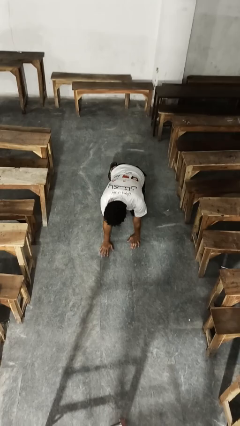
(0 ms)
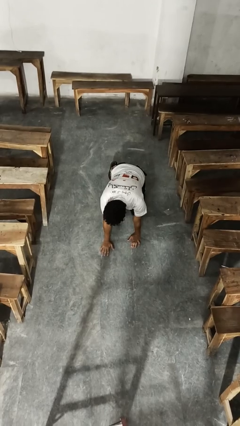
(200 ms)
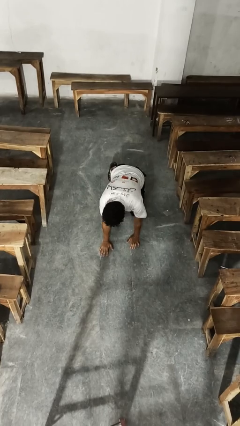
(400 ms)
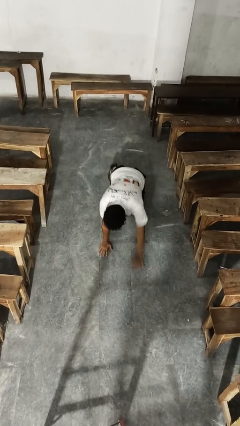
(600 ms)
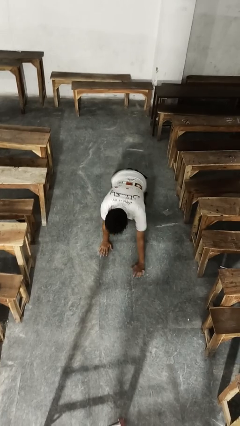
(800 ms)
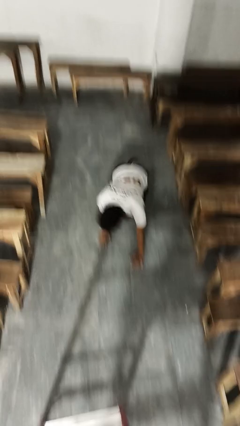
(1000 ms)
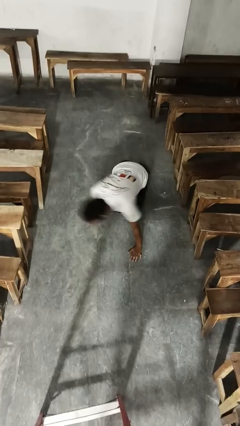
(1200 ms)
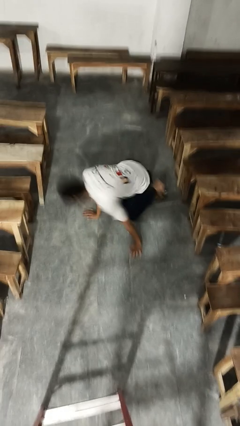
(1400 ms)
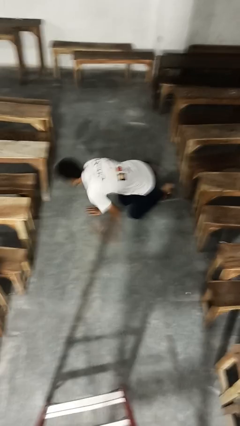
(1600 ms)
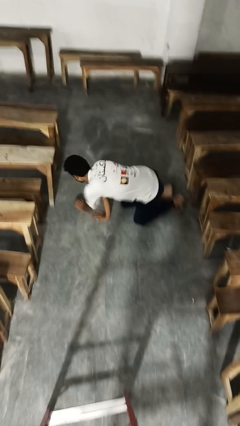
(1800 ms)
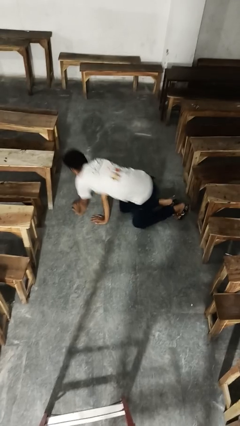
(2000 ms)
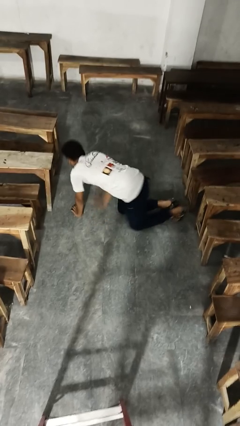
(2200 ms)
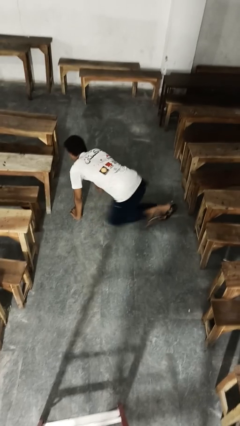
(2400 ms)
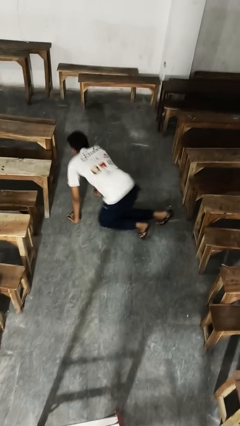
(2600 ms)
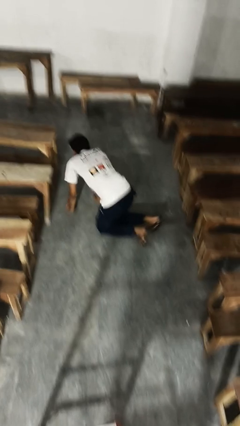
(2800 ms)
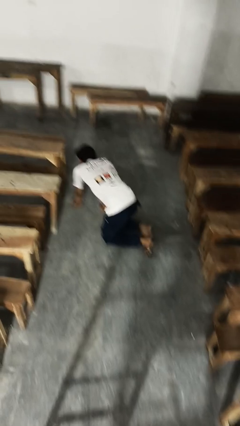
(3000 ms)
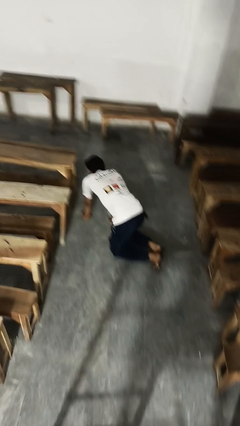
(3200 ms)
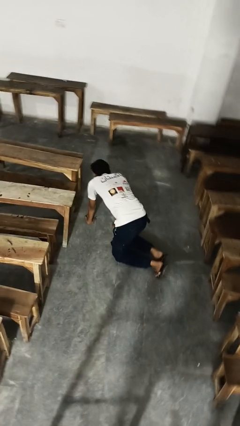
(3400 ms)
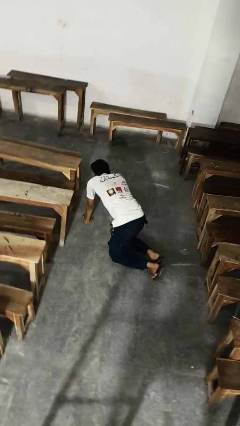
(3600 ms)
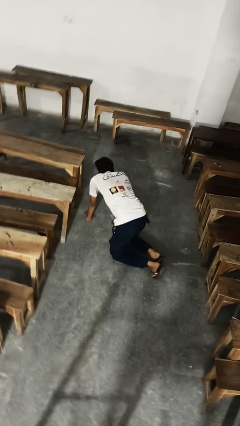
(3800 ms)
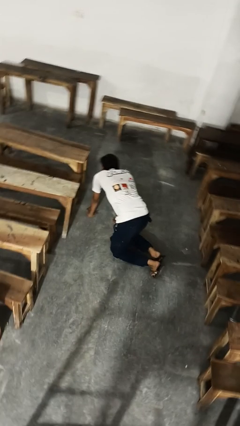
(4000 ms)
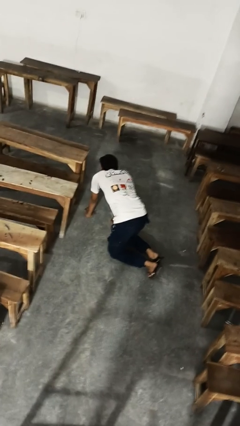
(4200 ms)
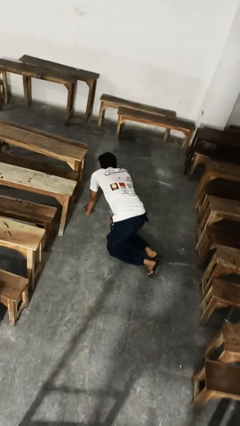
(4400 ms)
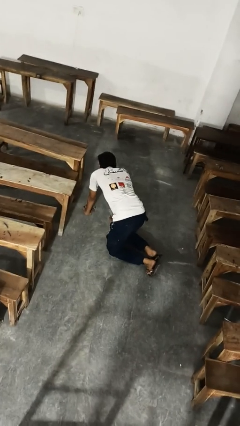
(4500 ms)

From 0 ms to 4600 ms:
person crawls

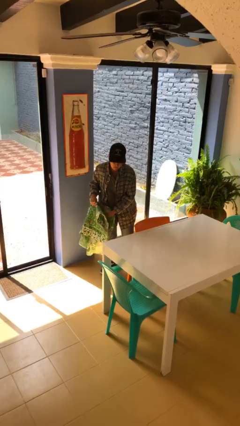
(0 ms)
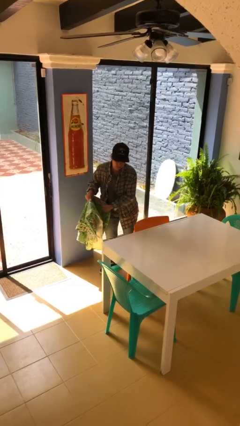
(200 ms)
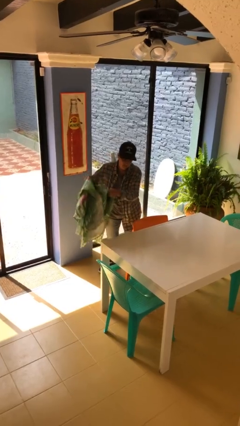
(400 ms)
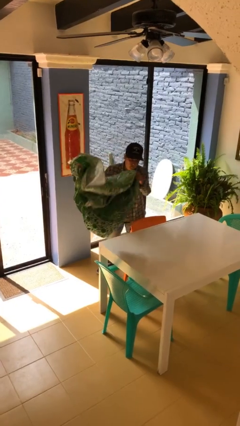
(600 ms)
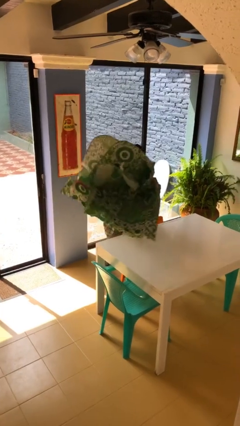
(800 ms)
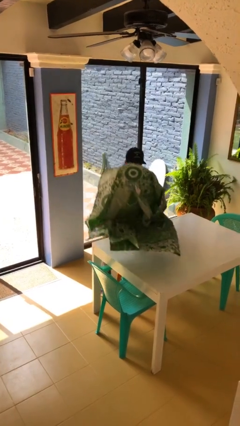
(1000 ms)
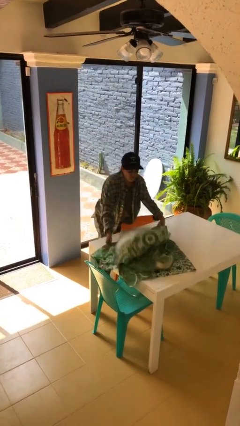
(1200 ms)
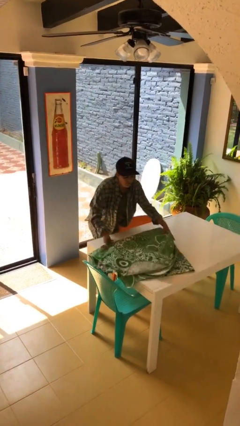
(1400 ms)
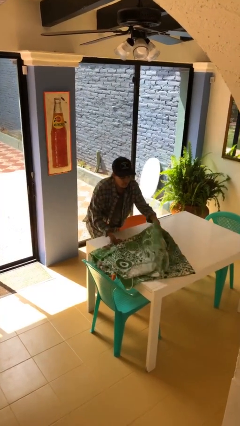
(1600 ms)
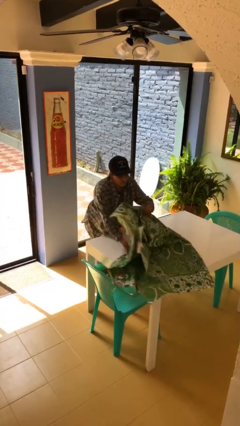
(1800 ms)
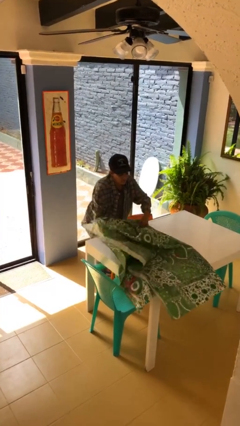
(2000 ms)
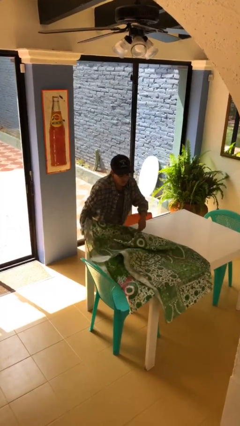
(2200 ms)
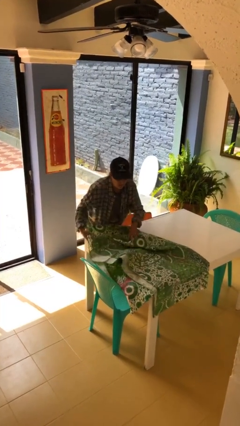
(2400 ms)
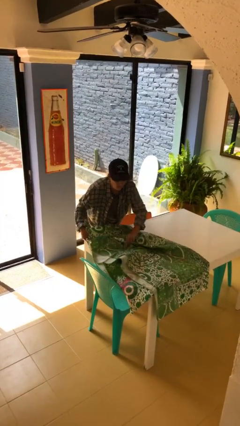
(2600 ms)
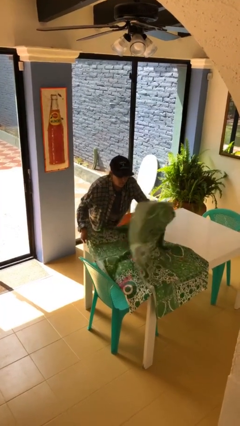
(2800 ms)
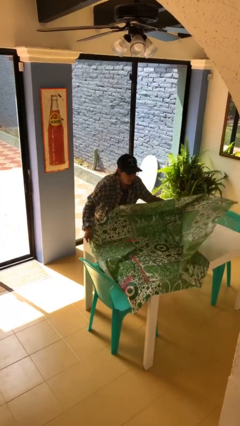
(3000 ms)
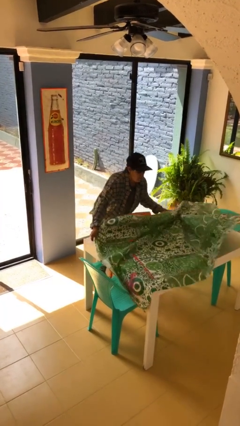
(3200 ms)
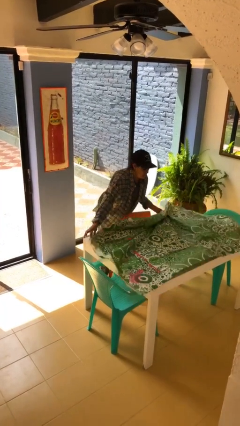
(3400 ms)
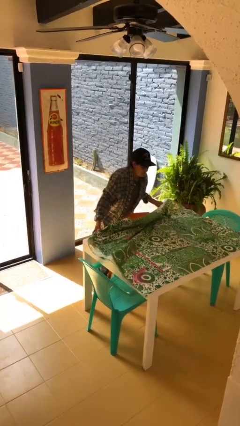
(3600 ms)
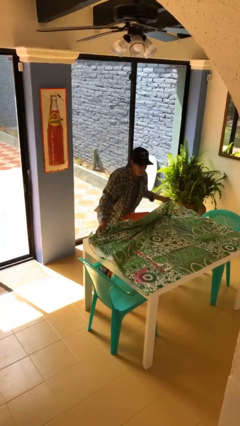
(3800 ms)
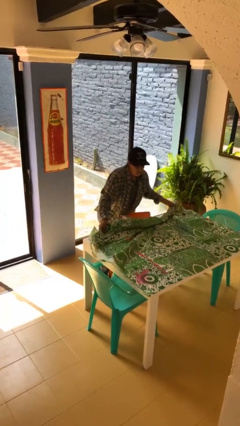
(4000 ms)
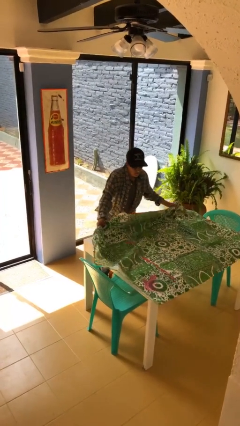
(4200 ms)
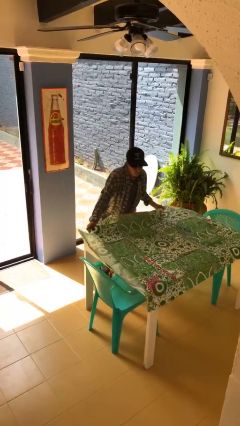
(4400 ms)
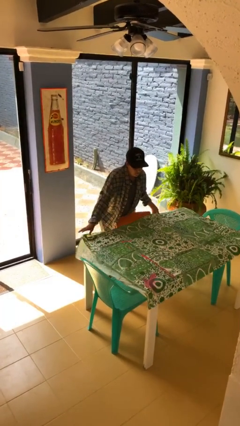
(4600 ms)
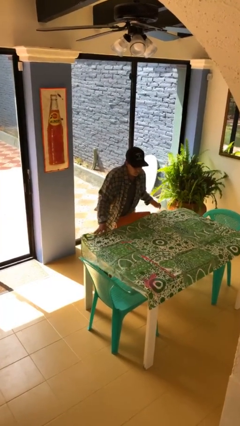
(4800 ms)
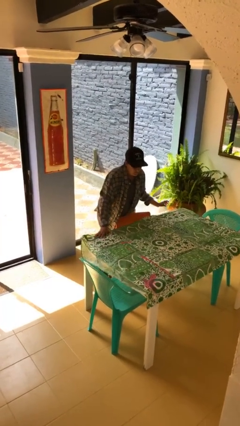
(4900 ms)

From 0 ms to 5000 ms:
person spreads tablecloth

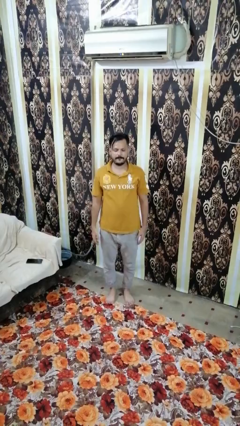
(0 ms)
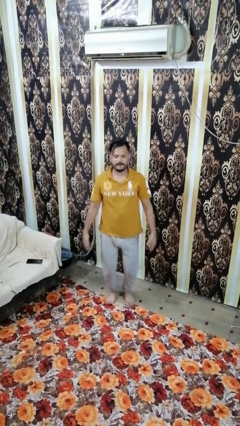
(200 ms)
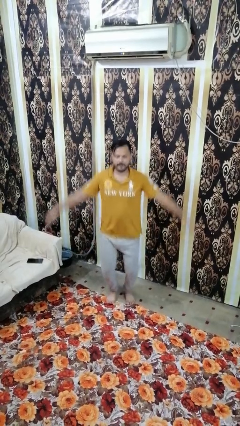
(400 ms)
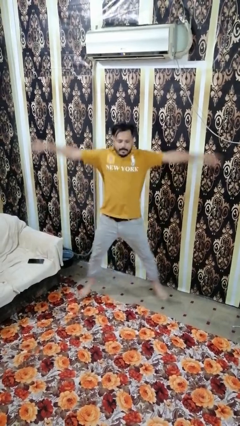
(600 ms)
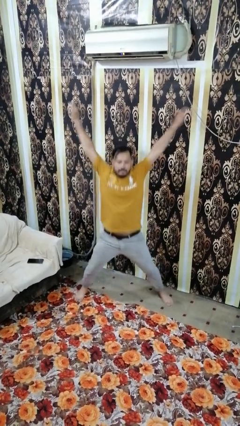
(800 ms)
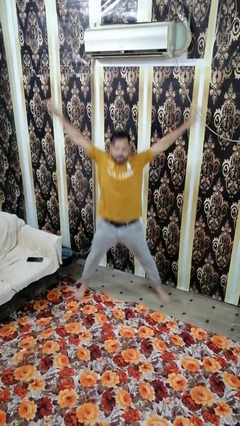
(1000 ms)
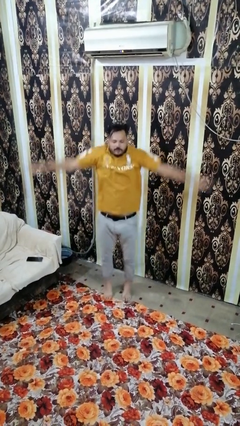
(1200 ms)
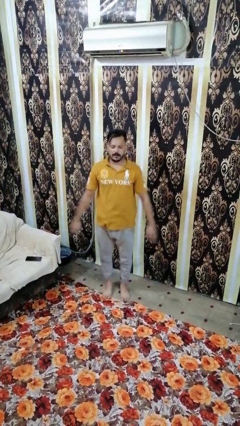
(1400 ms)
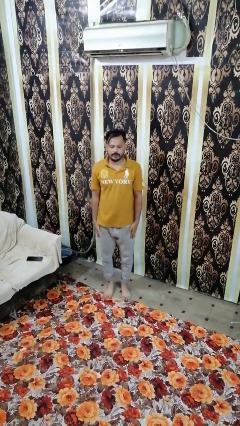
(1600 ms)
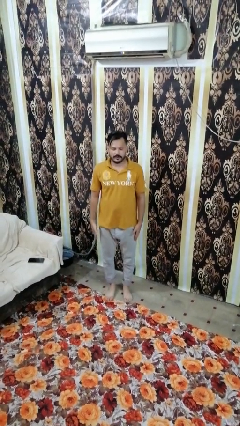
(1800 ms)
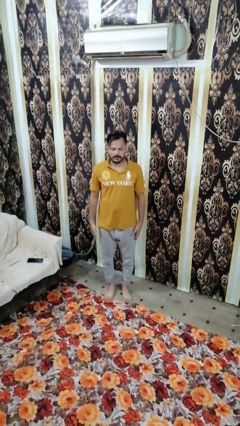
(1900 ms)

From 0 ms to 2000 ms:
person exercises with jumping jacks

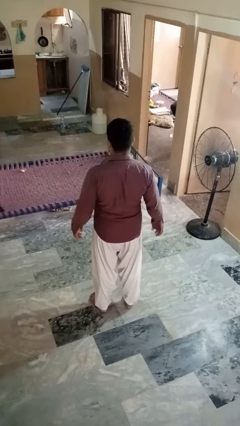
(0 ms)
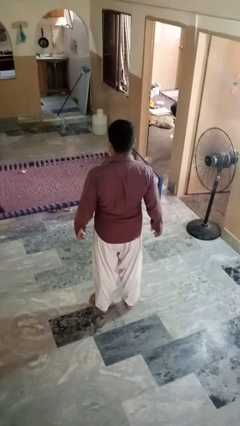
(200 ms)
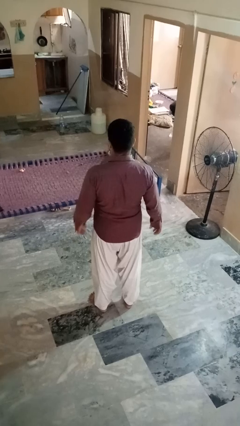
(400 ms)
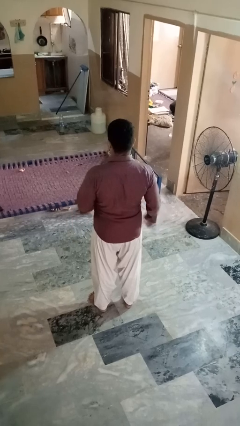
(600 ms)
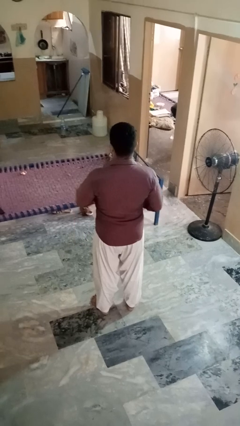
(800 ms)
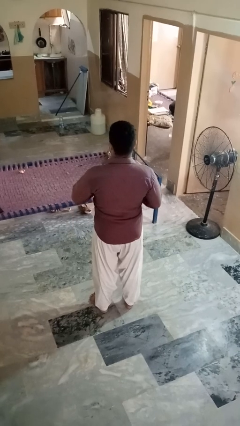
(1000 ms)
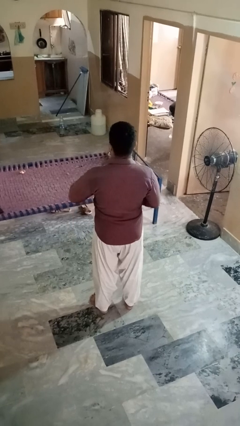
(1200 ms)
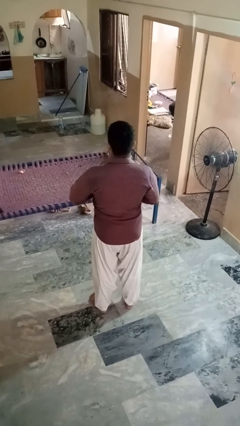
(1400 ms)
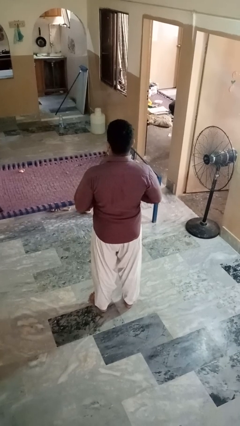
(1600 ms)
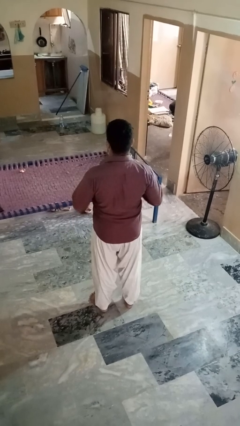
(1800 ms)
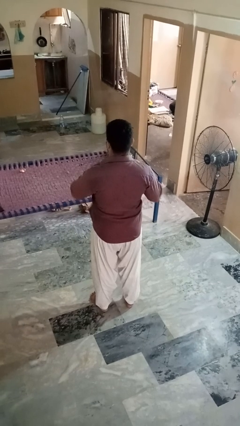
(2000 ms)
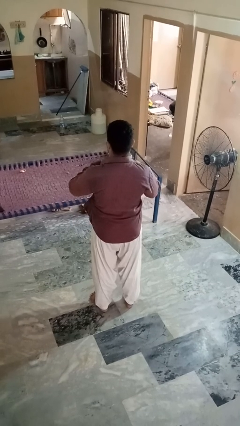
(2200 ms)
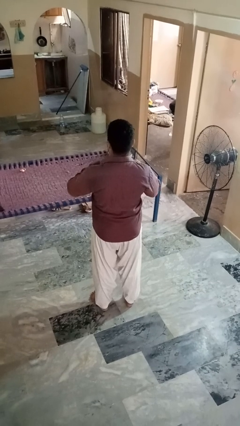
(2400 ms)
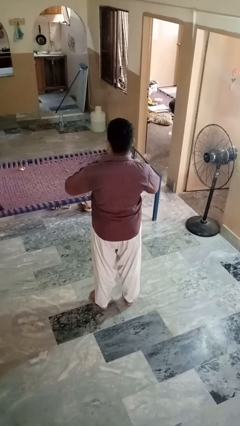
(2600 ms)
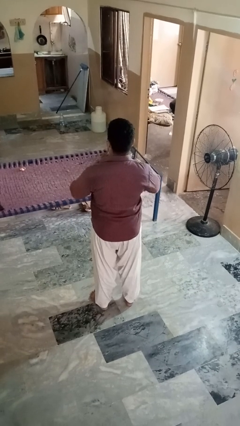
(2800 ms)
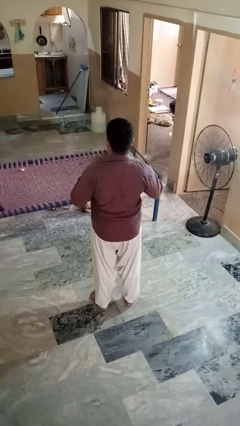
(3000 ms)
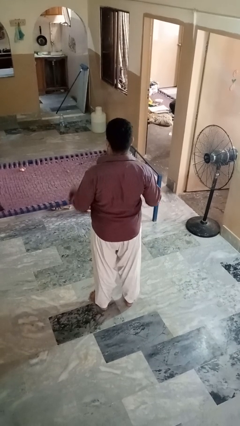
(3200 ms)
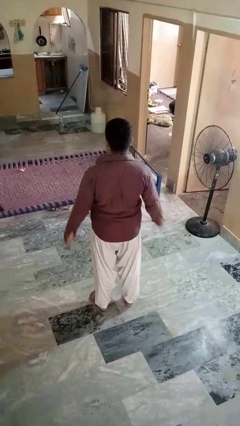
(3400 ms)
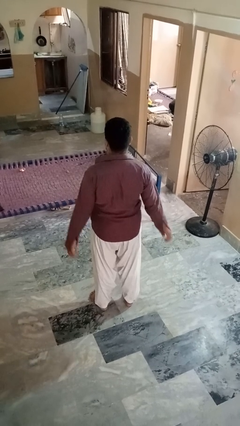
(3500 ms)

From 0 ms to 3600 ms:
person unbuttons shirt

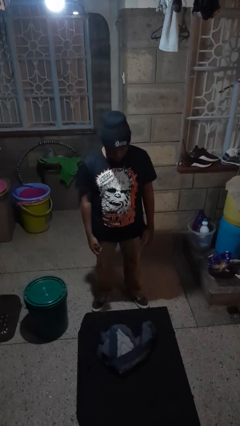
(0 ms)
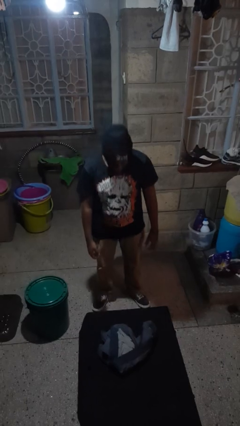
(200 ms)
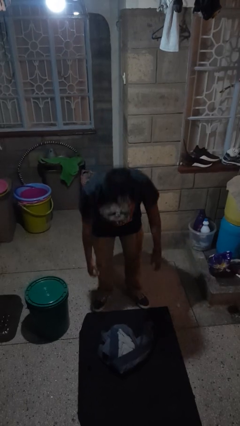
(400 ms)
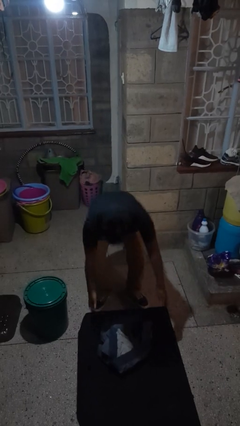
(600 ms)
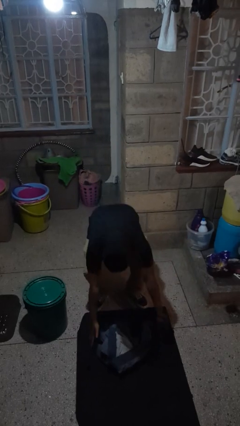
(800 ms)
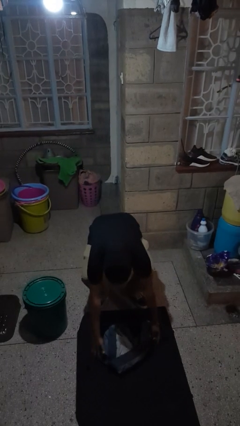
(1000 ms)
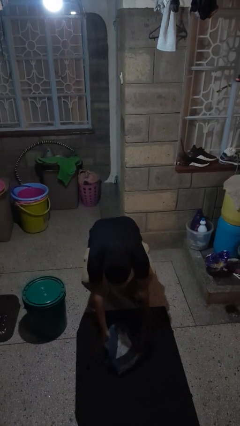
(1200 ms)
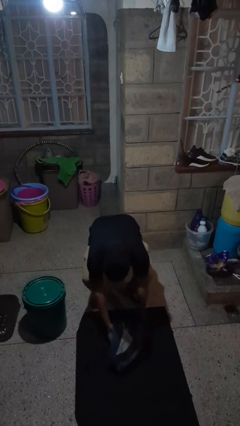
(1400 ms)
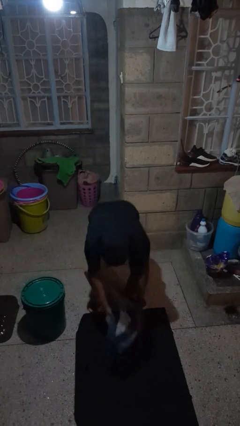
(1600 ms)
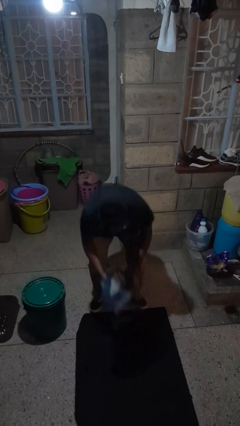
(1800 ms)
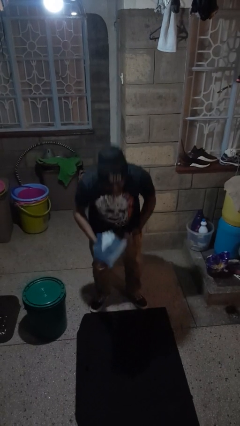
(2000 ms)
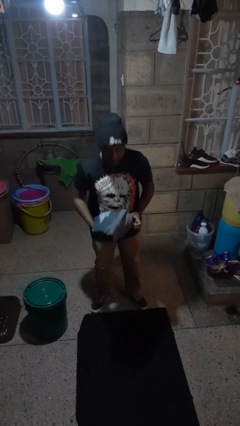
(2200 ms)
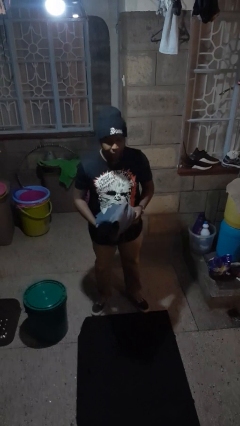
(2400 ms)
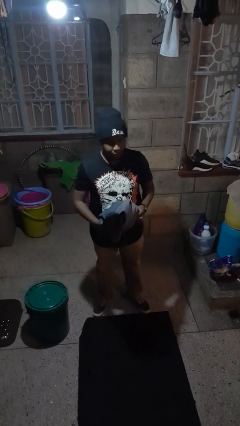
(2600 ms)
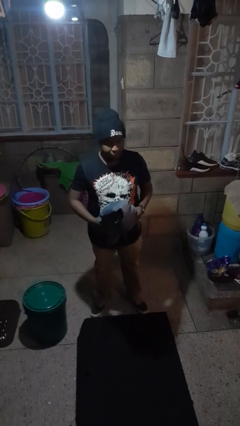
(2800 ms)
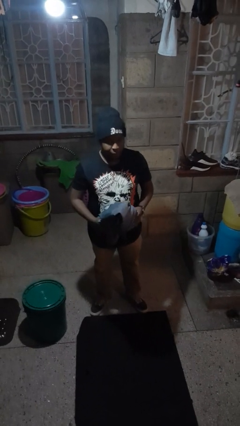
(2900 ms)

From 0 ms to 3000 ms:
person picks up object from floor
